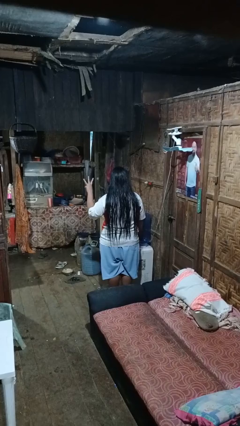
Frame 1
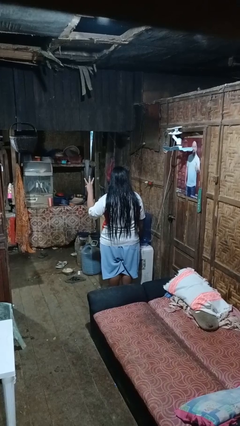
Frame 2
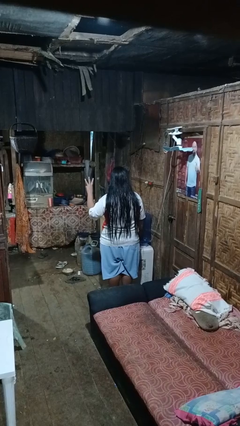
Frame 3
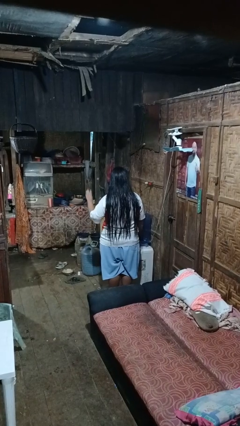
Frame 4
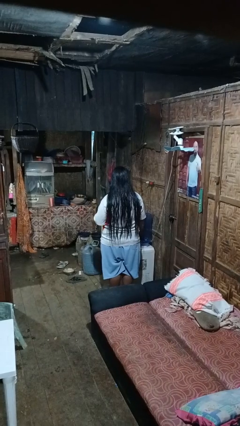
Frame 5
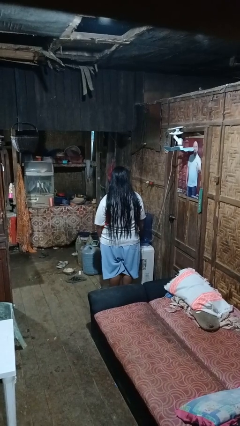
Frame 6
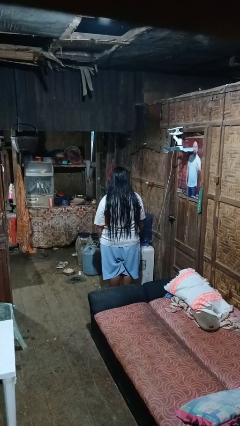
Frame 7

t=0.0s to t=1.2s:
person gestures number three

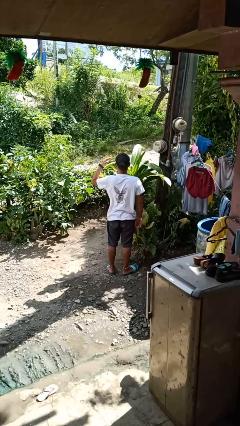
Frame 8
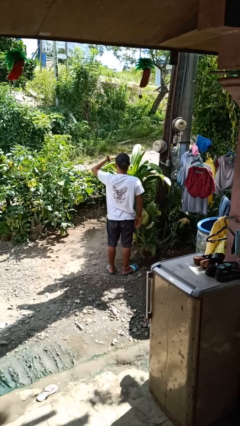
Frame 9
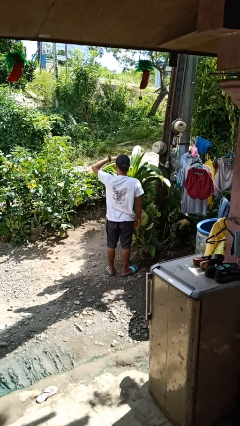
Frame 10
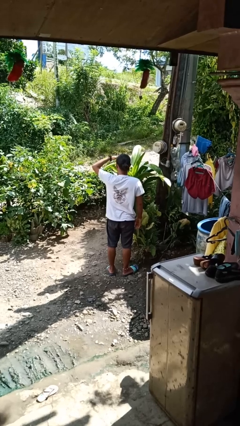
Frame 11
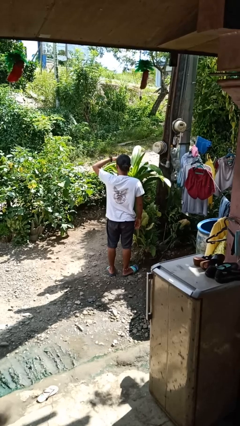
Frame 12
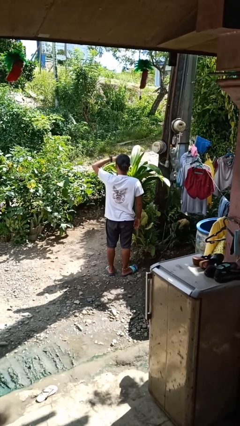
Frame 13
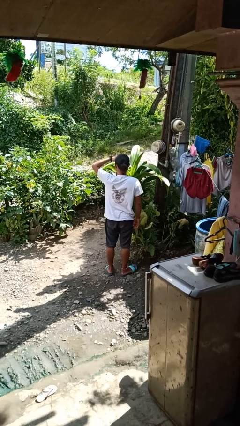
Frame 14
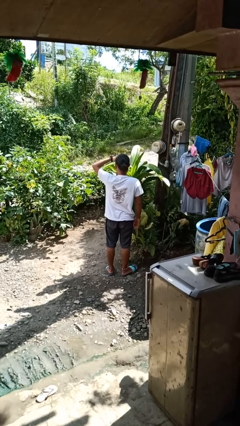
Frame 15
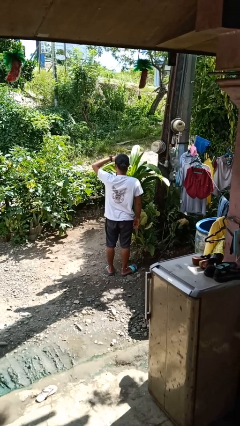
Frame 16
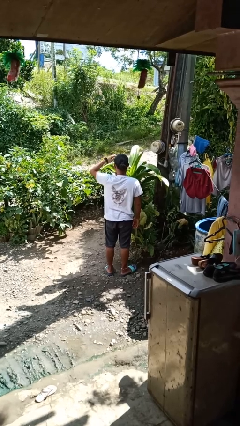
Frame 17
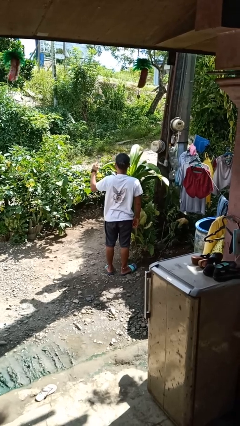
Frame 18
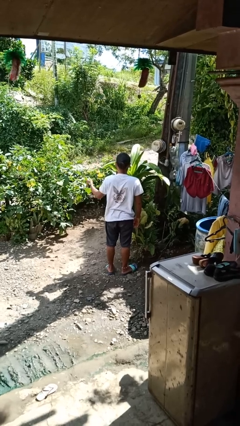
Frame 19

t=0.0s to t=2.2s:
person shades eyes

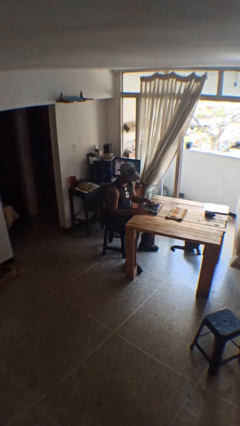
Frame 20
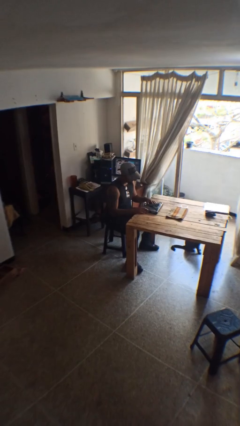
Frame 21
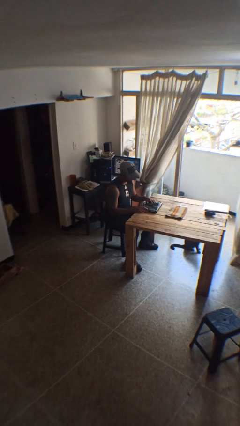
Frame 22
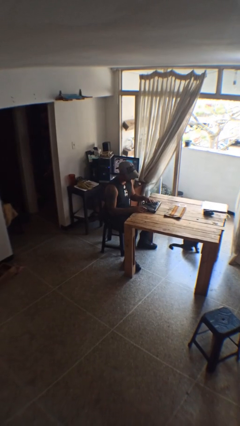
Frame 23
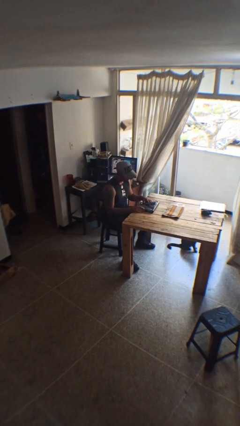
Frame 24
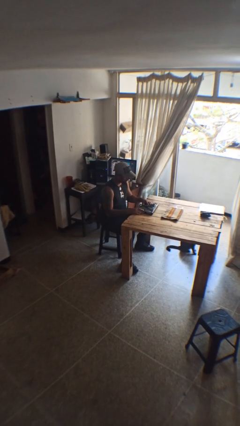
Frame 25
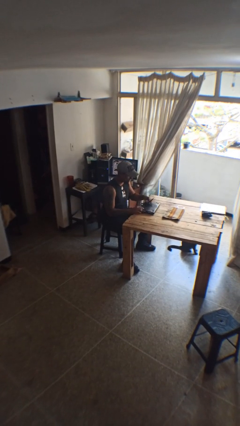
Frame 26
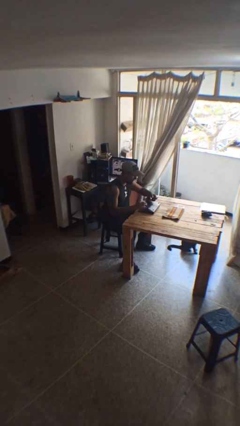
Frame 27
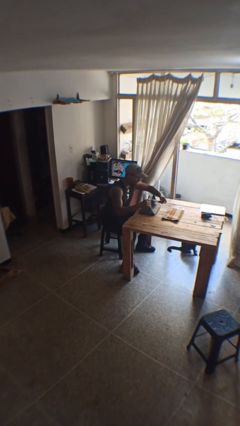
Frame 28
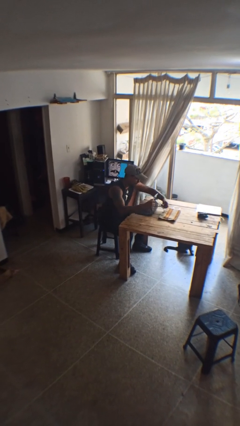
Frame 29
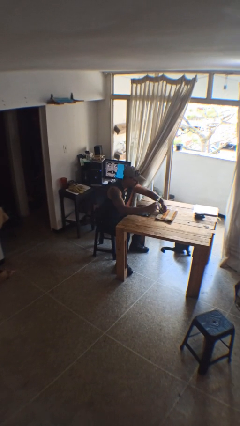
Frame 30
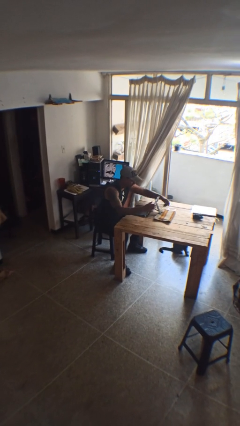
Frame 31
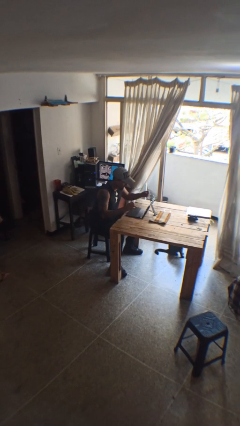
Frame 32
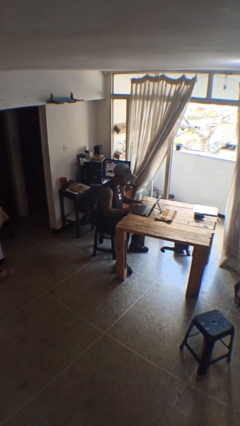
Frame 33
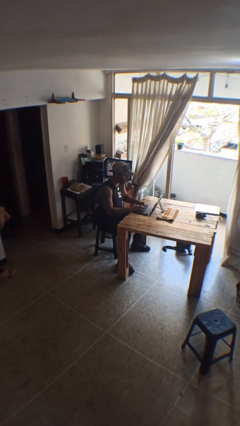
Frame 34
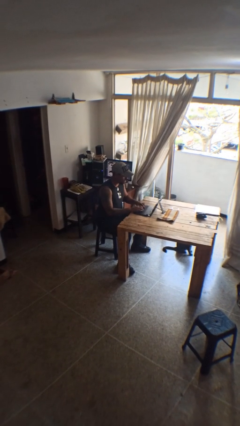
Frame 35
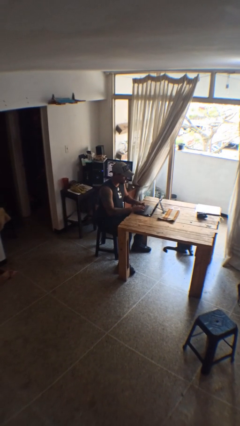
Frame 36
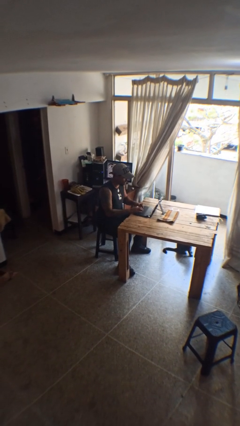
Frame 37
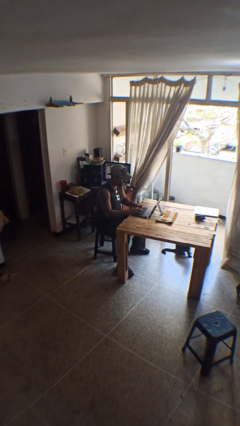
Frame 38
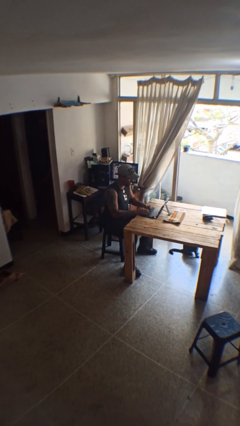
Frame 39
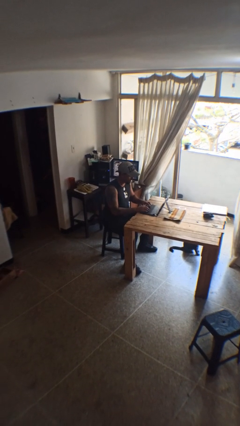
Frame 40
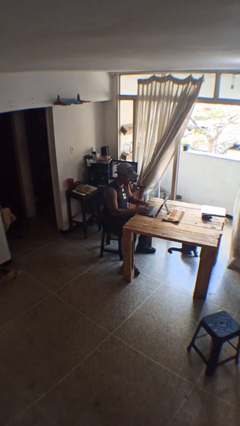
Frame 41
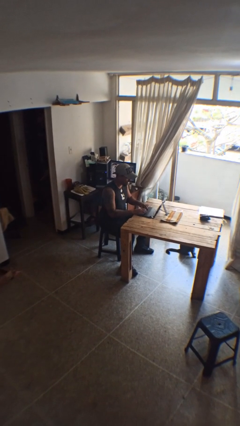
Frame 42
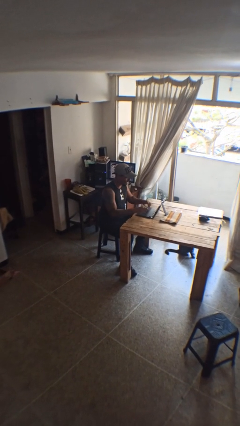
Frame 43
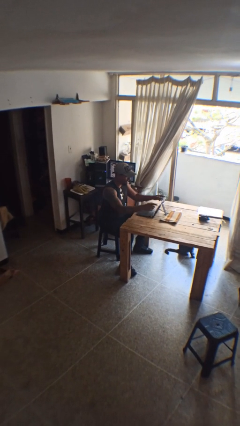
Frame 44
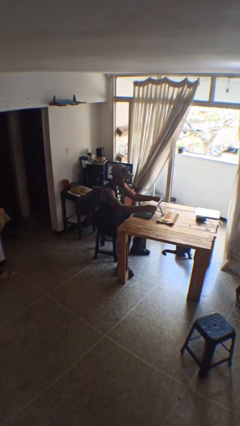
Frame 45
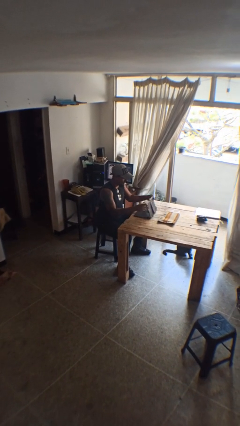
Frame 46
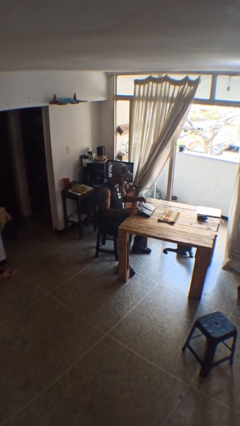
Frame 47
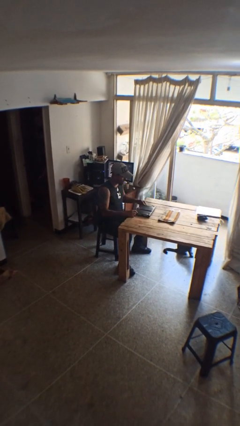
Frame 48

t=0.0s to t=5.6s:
person interacts with laptop

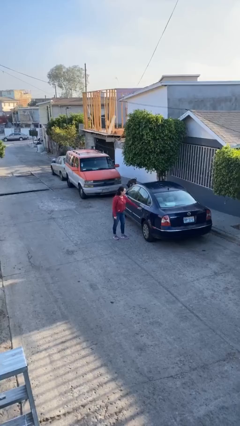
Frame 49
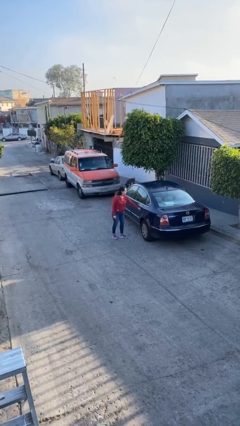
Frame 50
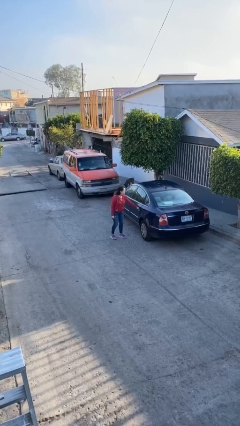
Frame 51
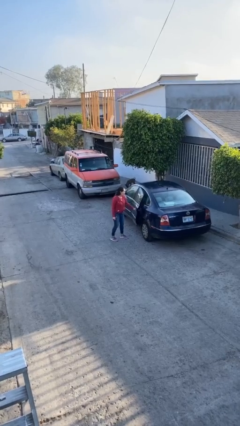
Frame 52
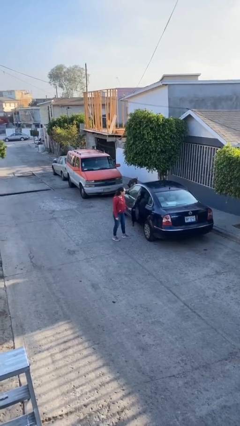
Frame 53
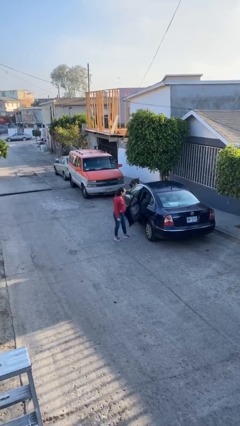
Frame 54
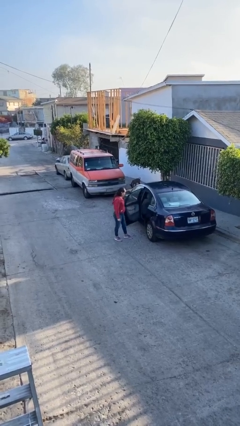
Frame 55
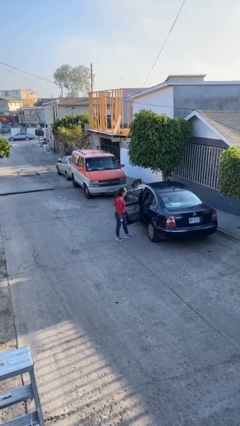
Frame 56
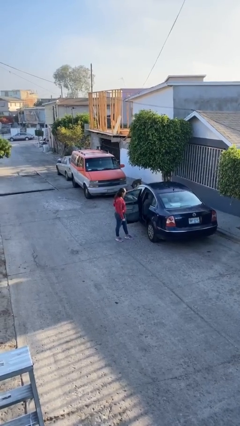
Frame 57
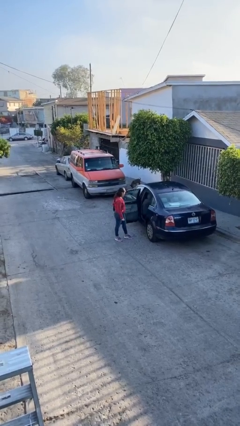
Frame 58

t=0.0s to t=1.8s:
person opens car door

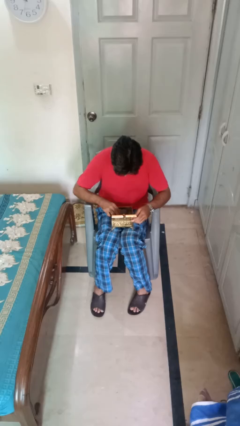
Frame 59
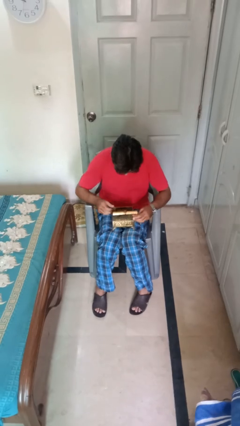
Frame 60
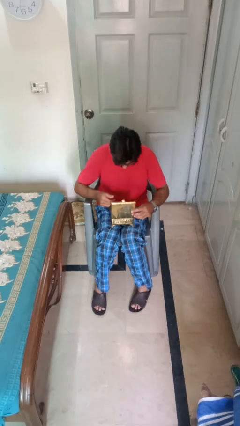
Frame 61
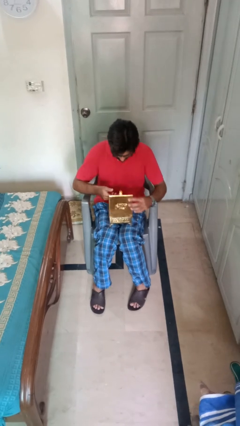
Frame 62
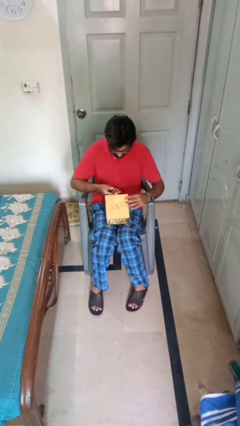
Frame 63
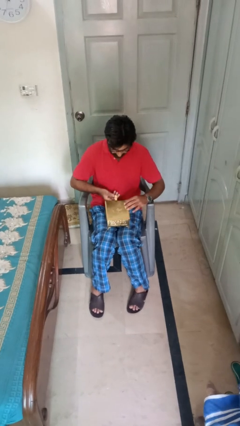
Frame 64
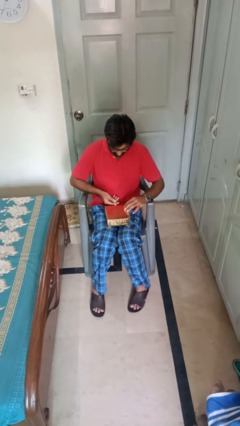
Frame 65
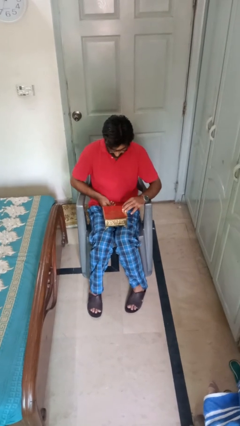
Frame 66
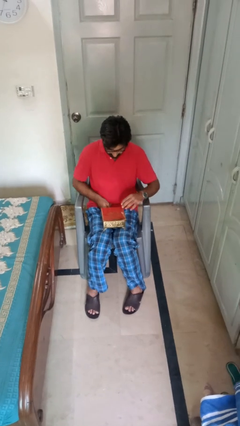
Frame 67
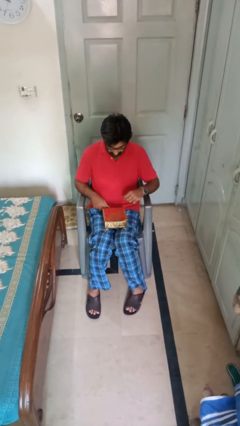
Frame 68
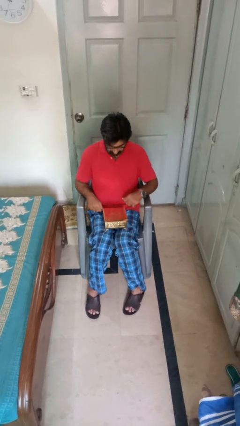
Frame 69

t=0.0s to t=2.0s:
person closes jewelry box

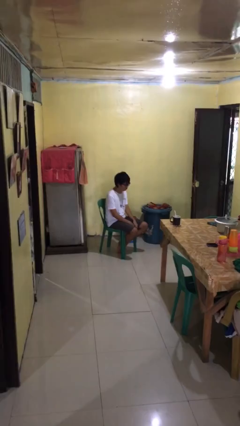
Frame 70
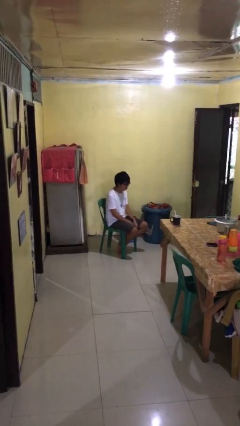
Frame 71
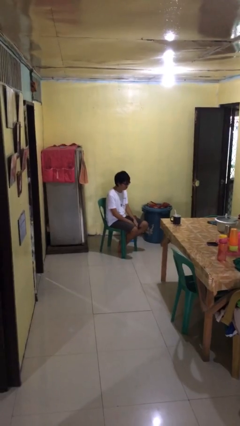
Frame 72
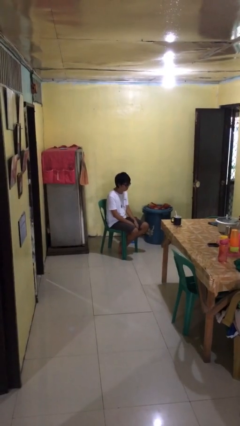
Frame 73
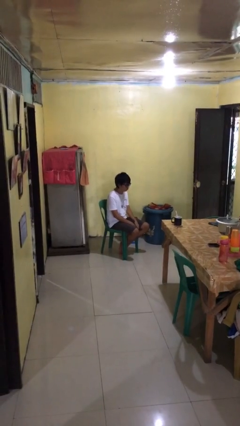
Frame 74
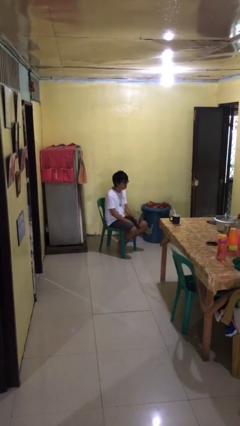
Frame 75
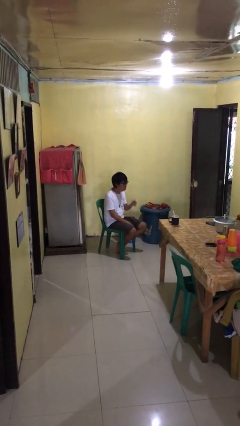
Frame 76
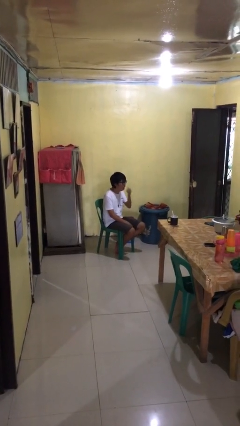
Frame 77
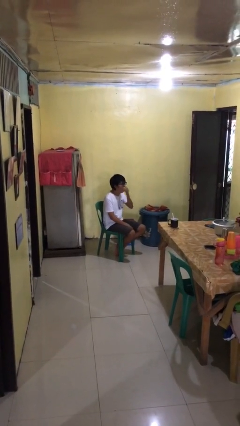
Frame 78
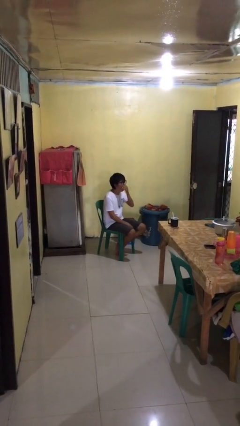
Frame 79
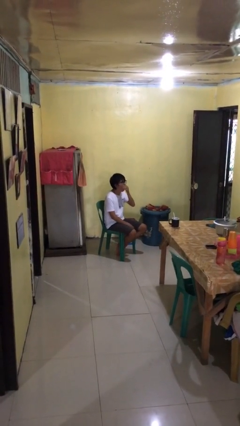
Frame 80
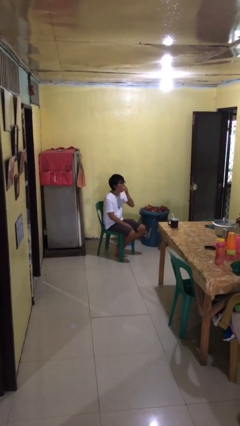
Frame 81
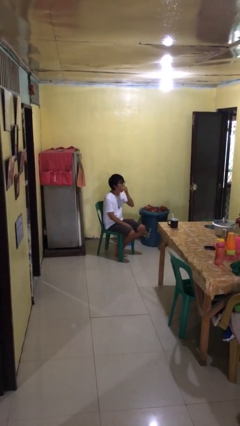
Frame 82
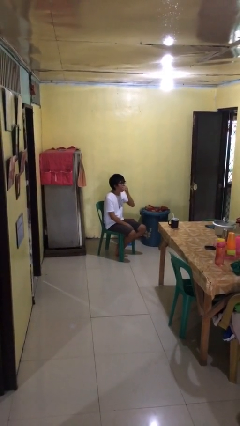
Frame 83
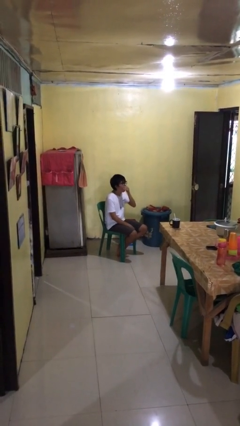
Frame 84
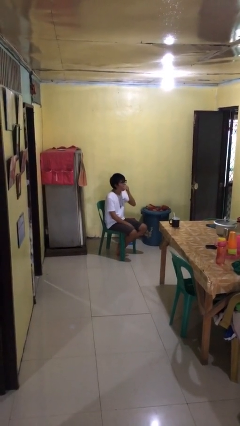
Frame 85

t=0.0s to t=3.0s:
person yawns

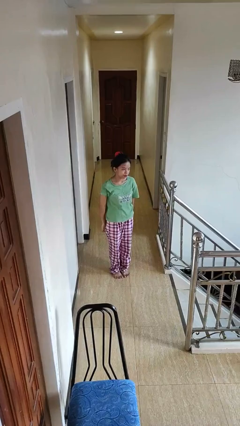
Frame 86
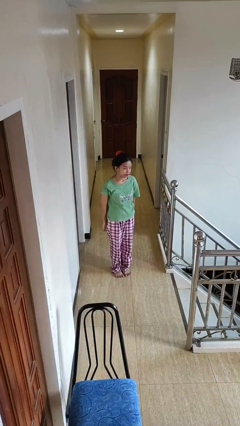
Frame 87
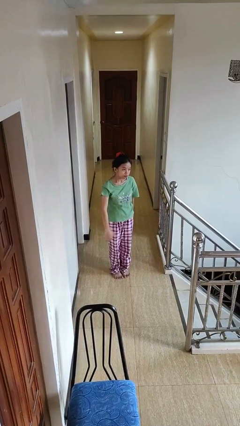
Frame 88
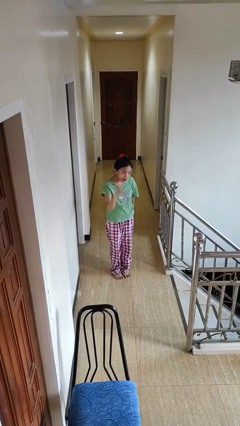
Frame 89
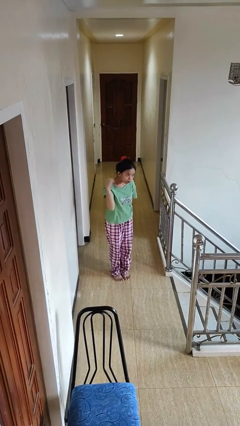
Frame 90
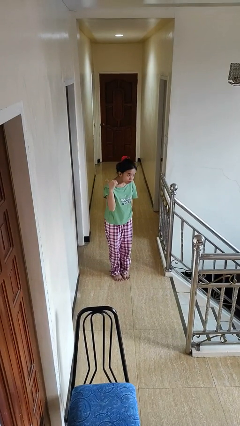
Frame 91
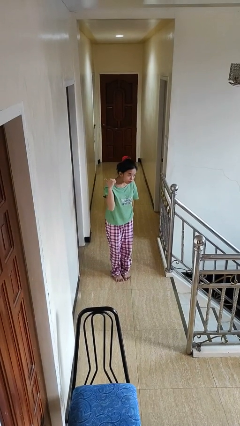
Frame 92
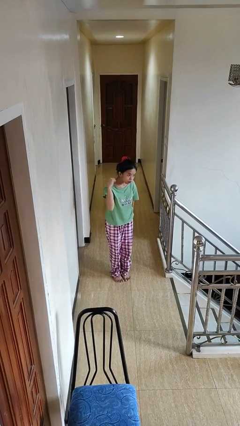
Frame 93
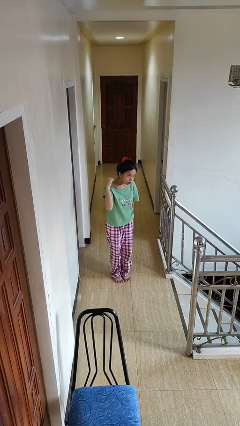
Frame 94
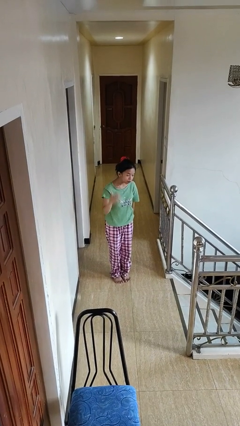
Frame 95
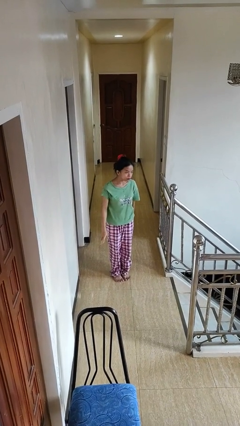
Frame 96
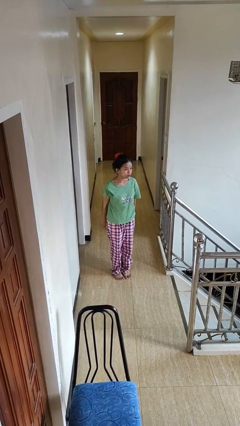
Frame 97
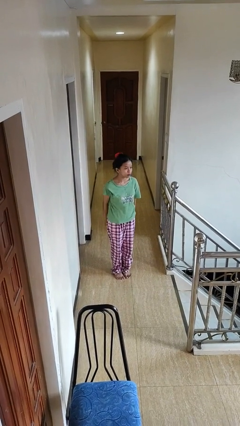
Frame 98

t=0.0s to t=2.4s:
person gestures behind me
